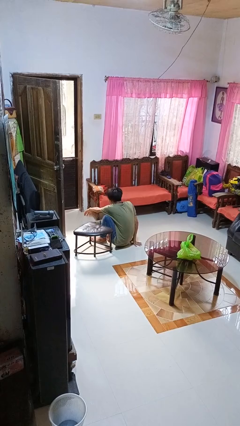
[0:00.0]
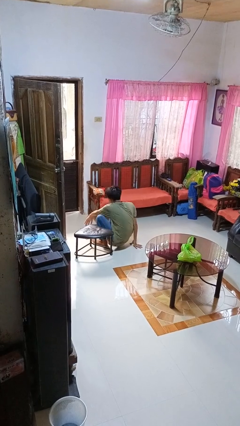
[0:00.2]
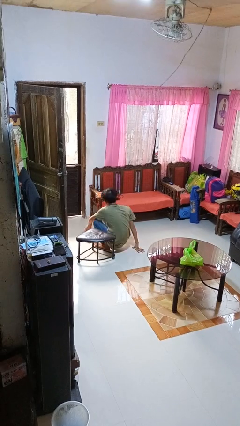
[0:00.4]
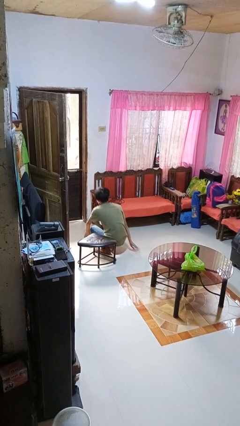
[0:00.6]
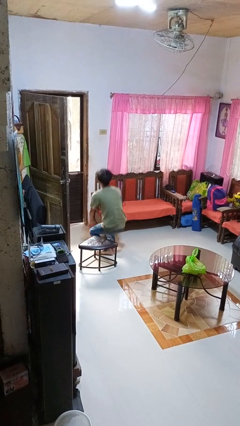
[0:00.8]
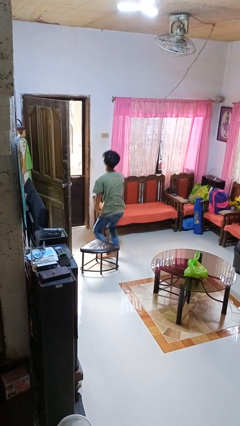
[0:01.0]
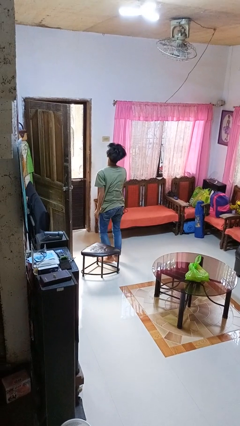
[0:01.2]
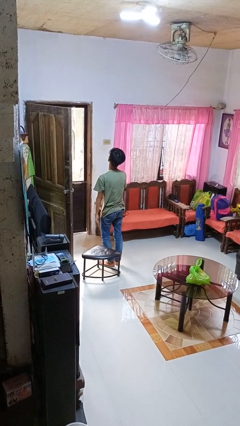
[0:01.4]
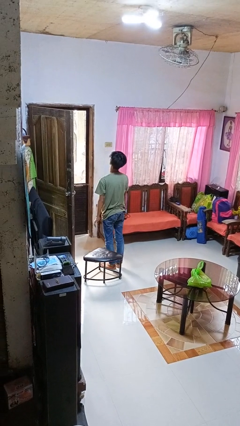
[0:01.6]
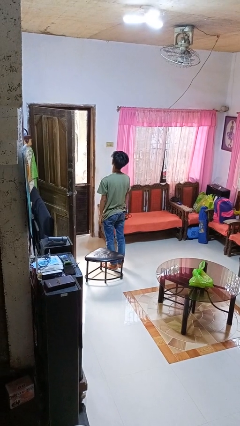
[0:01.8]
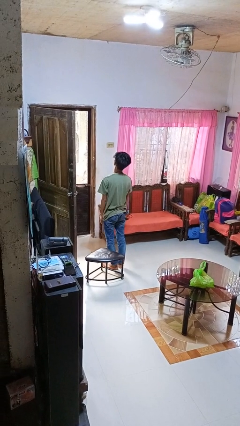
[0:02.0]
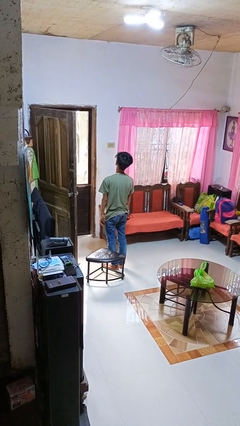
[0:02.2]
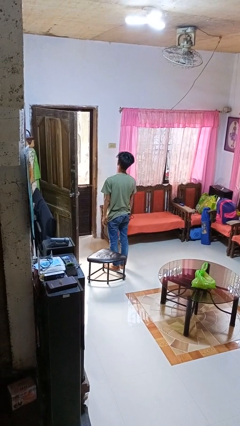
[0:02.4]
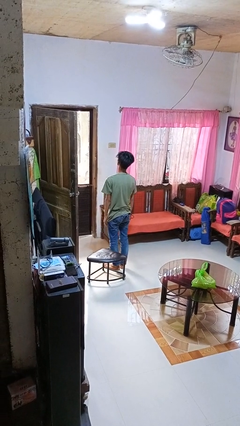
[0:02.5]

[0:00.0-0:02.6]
person stands up from floor

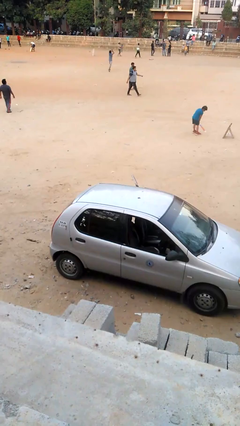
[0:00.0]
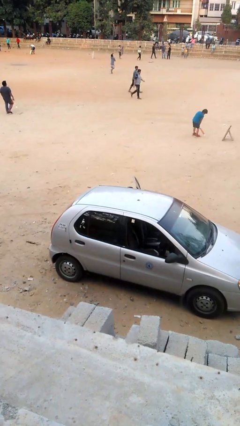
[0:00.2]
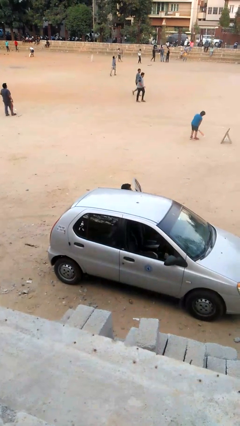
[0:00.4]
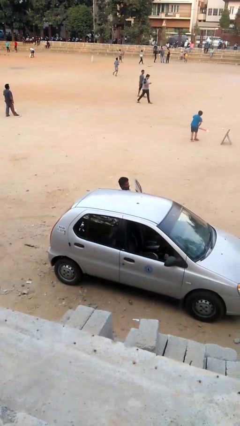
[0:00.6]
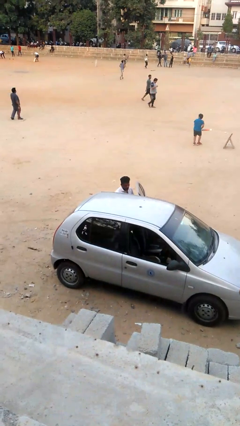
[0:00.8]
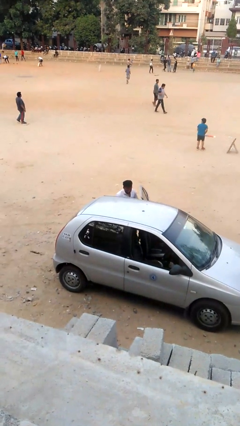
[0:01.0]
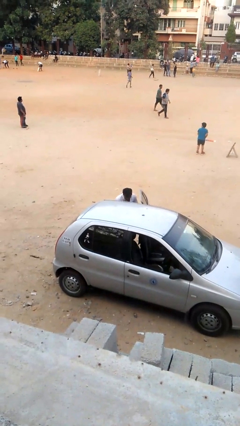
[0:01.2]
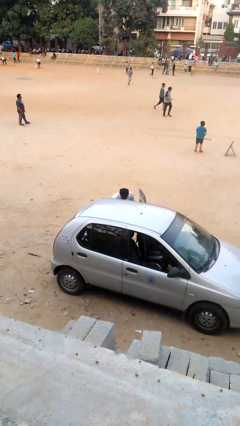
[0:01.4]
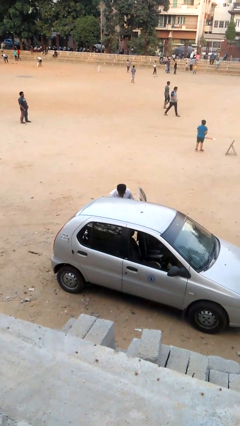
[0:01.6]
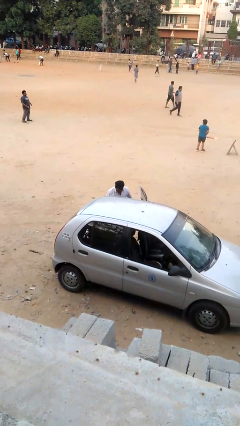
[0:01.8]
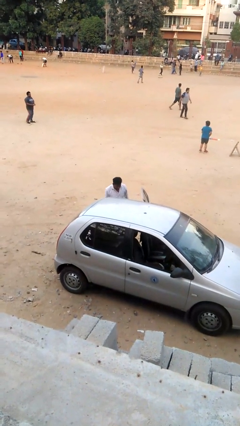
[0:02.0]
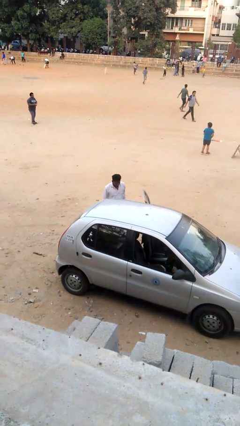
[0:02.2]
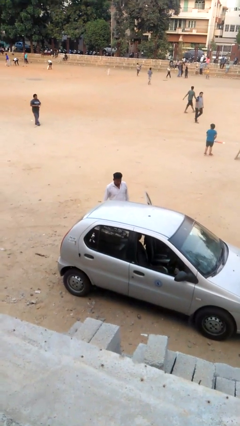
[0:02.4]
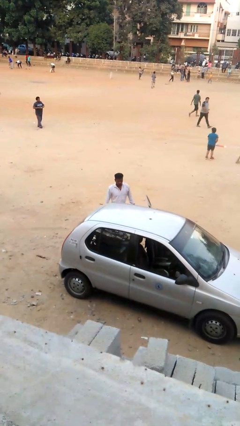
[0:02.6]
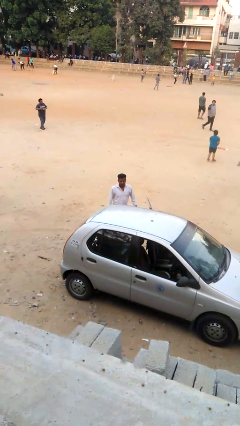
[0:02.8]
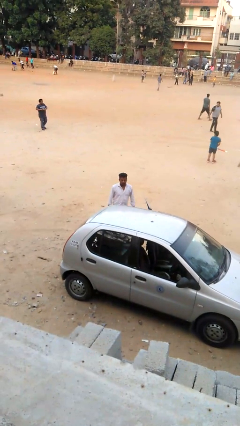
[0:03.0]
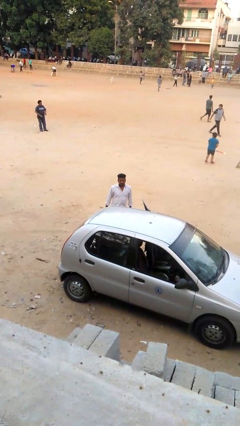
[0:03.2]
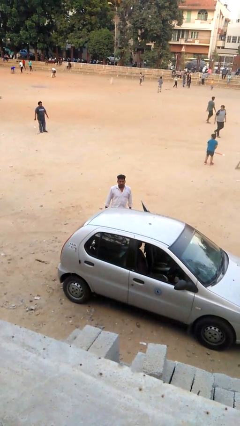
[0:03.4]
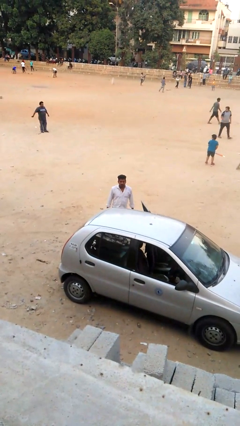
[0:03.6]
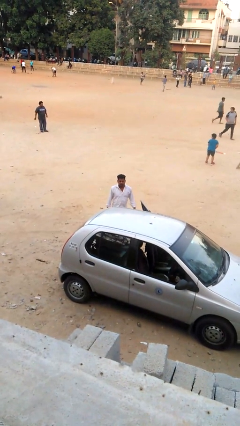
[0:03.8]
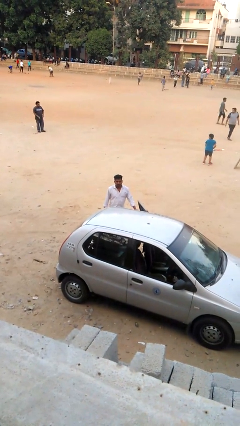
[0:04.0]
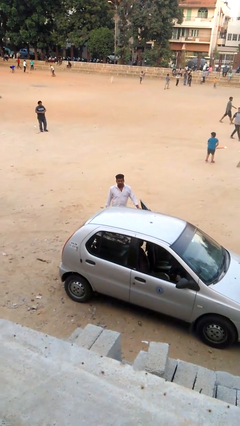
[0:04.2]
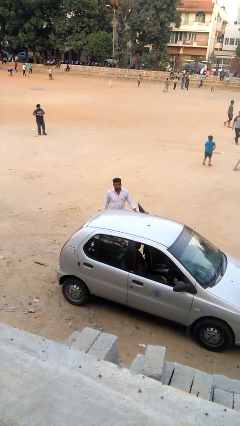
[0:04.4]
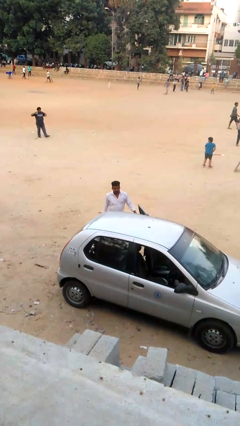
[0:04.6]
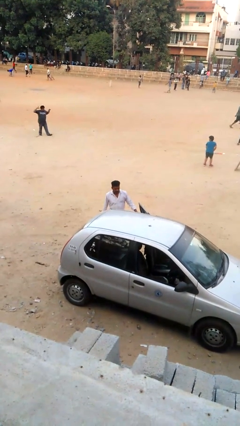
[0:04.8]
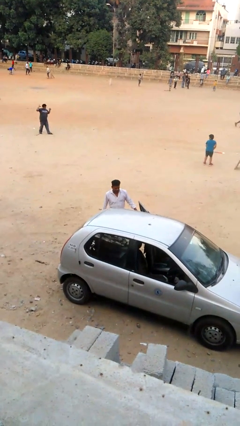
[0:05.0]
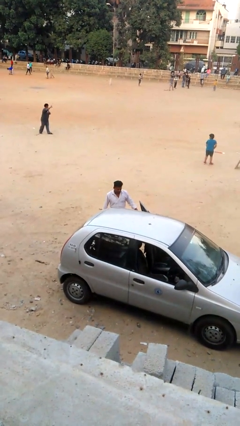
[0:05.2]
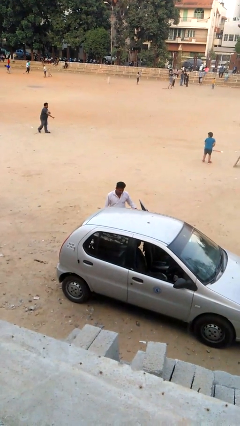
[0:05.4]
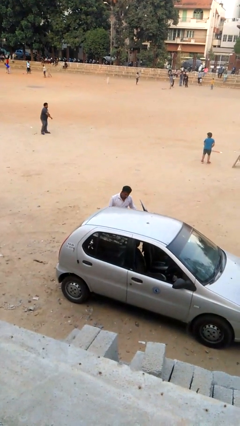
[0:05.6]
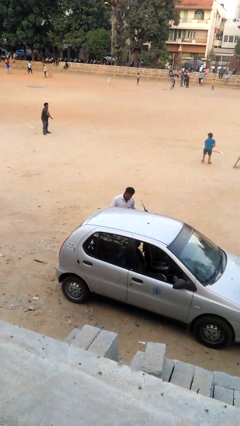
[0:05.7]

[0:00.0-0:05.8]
person exits car

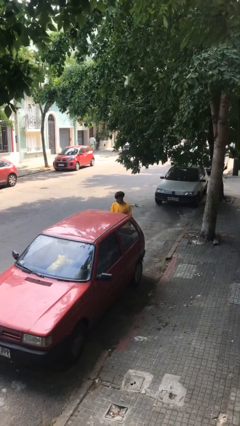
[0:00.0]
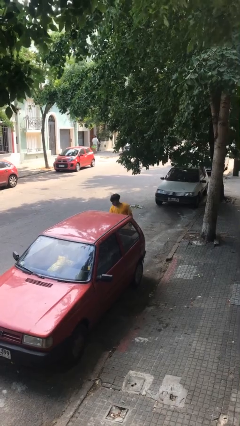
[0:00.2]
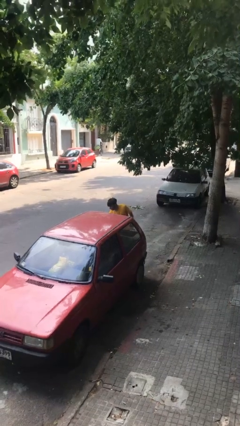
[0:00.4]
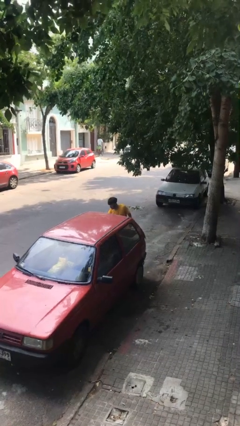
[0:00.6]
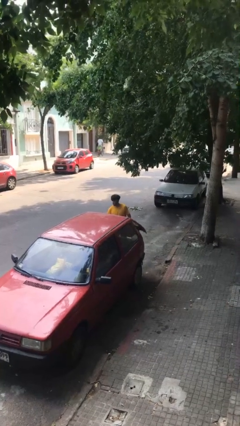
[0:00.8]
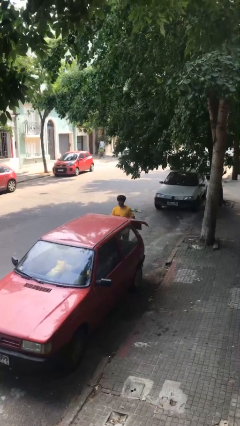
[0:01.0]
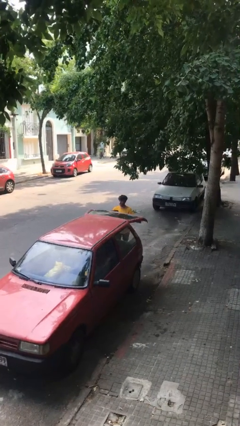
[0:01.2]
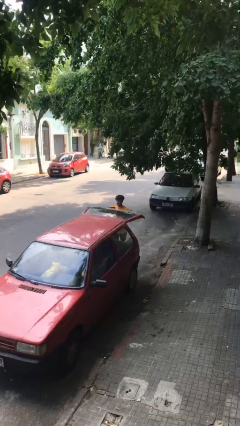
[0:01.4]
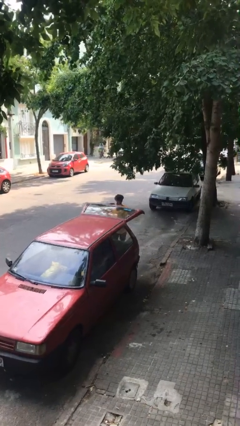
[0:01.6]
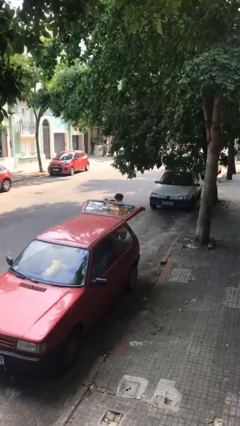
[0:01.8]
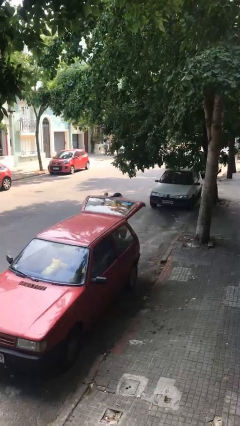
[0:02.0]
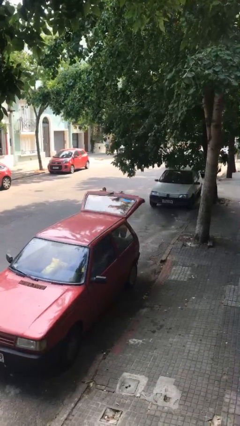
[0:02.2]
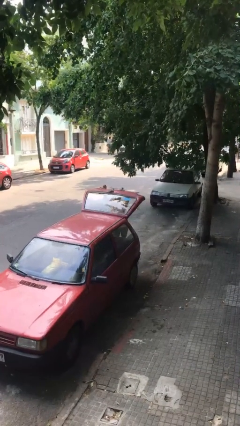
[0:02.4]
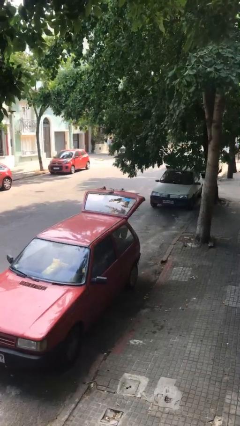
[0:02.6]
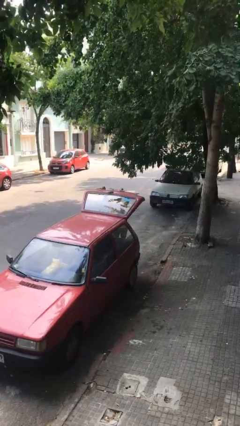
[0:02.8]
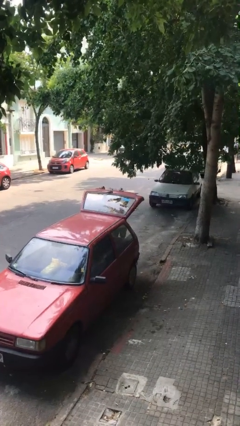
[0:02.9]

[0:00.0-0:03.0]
person opens car trunk

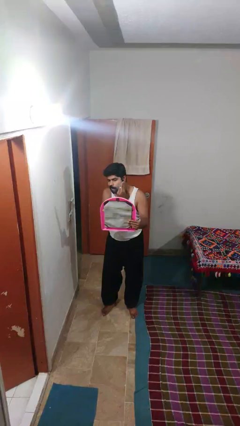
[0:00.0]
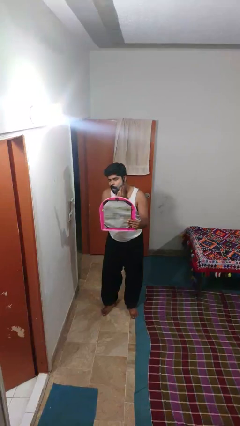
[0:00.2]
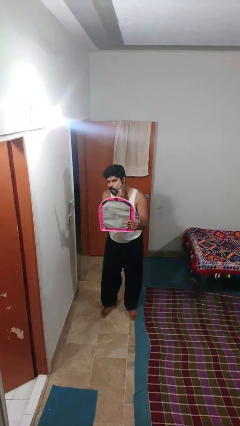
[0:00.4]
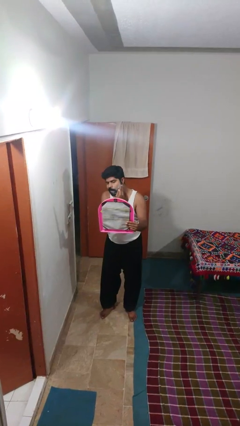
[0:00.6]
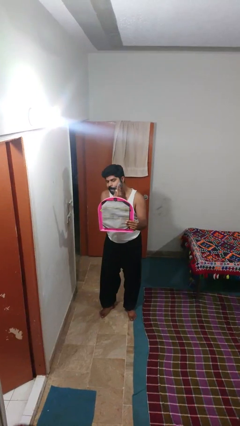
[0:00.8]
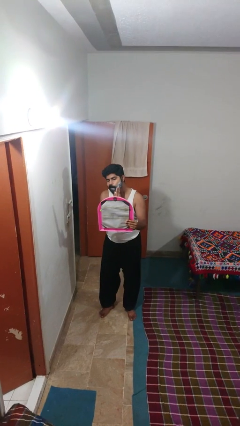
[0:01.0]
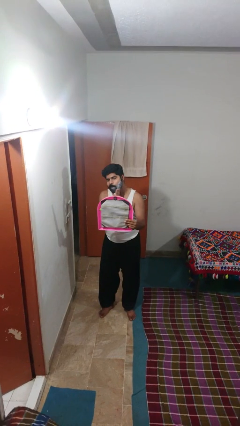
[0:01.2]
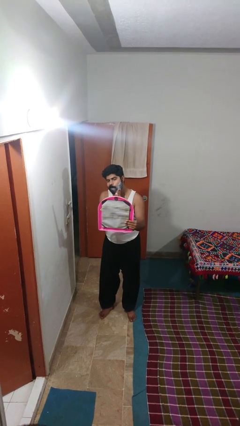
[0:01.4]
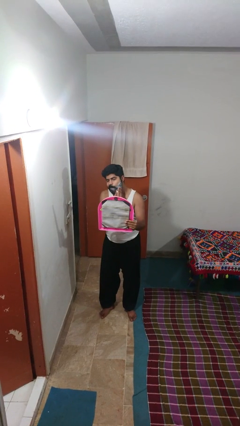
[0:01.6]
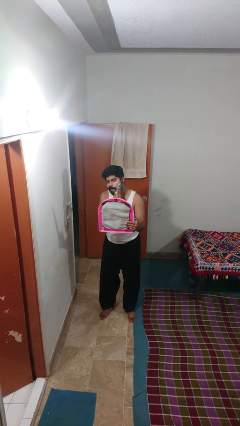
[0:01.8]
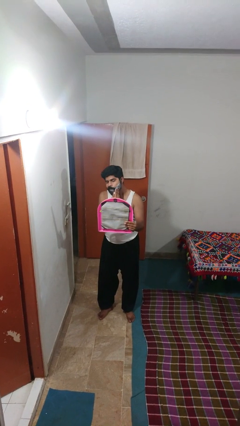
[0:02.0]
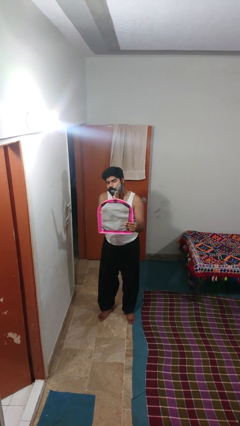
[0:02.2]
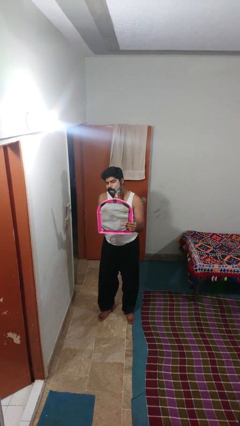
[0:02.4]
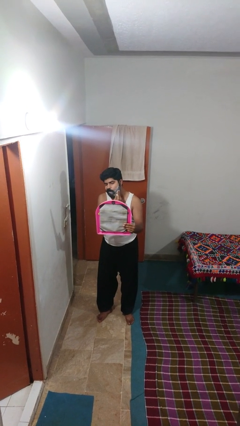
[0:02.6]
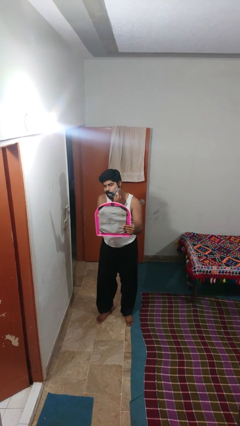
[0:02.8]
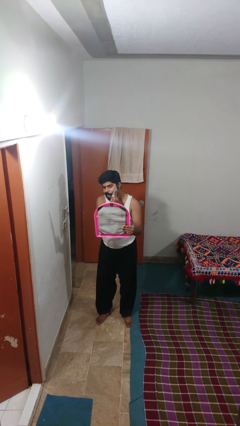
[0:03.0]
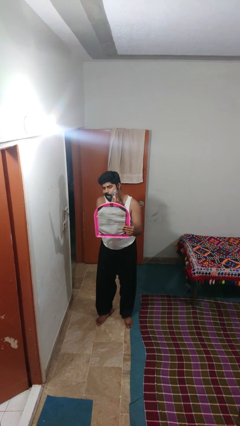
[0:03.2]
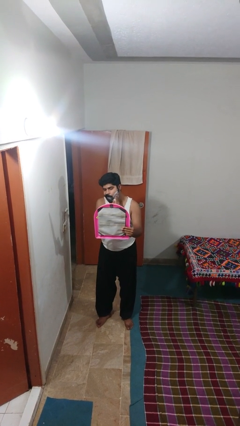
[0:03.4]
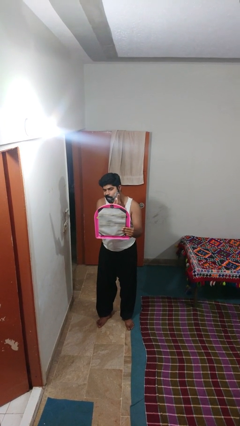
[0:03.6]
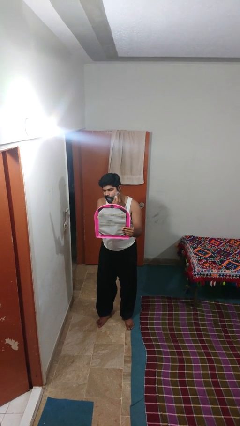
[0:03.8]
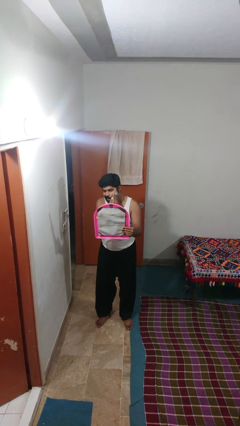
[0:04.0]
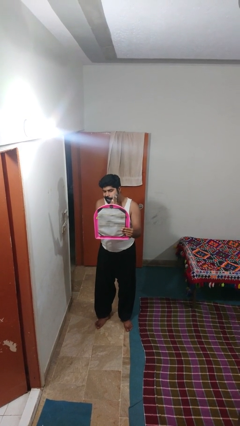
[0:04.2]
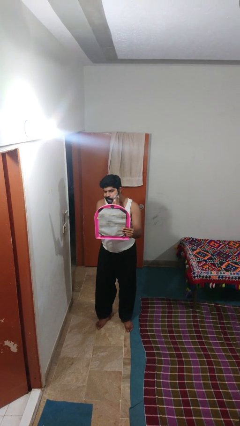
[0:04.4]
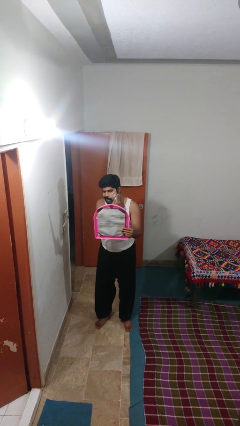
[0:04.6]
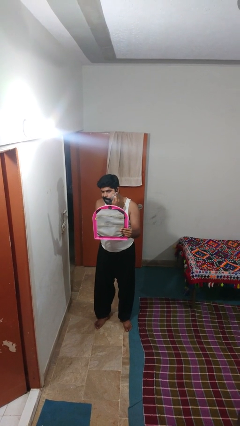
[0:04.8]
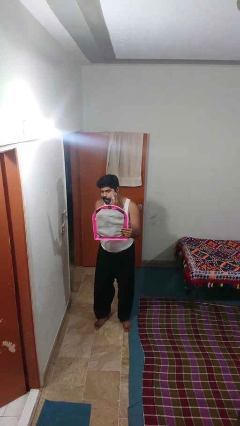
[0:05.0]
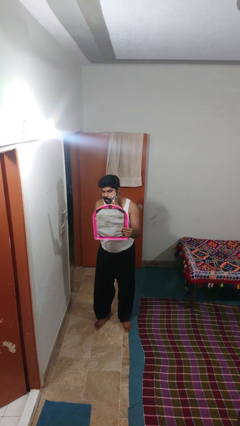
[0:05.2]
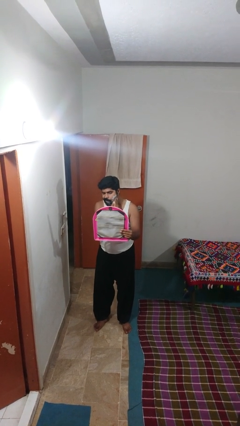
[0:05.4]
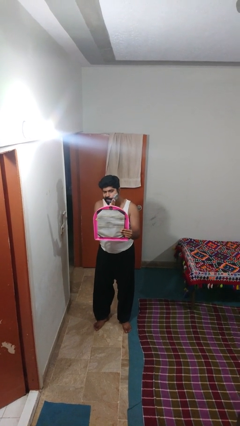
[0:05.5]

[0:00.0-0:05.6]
person applies shaving cream

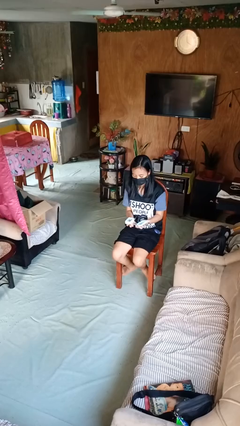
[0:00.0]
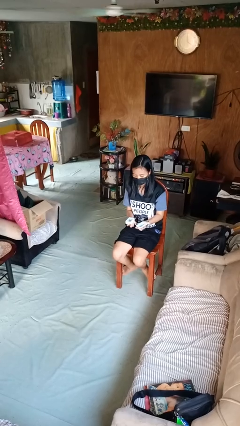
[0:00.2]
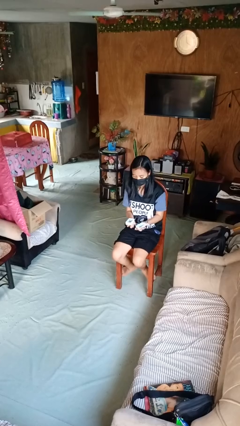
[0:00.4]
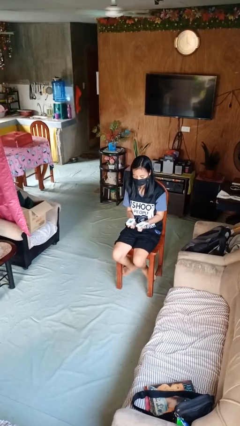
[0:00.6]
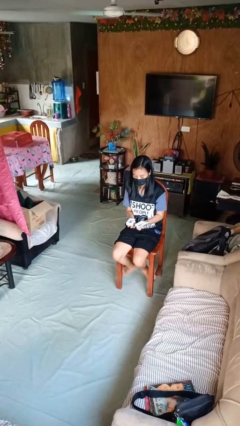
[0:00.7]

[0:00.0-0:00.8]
person opens jewelry box
